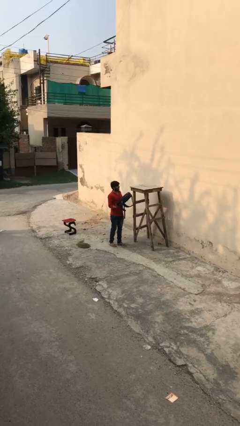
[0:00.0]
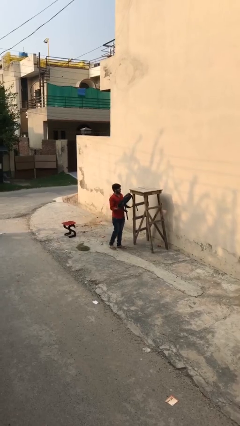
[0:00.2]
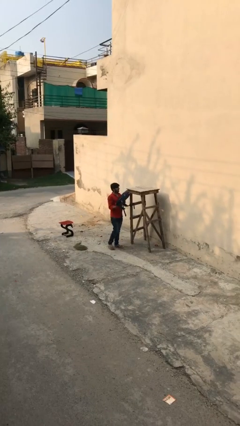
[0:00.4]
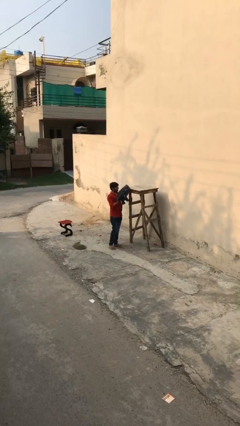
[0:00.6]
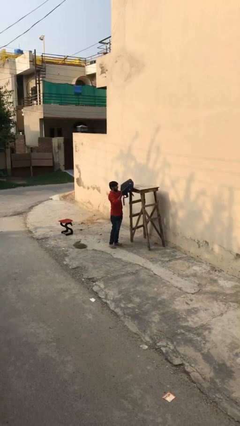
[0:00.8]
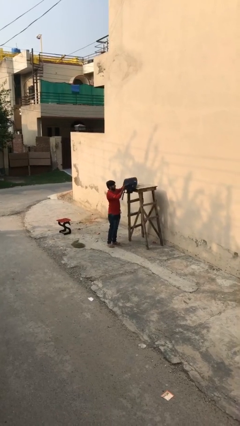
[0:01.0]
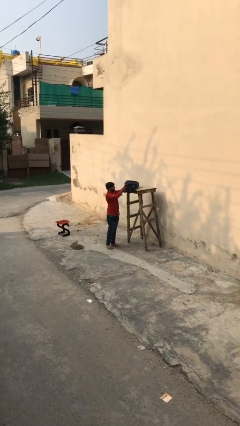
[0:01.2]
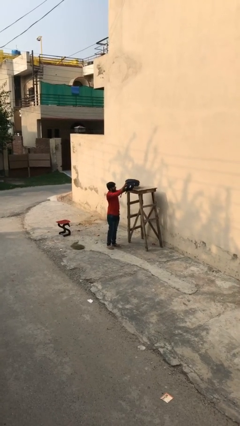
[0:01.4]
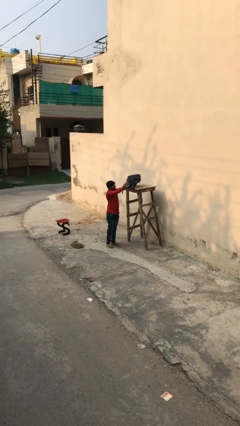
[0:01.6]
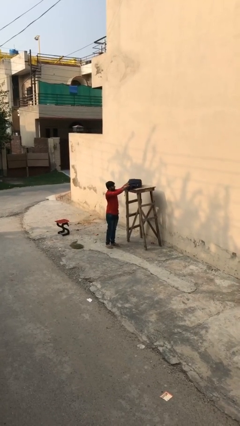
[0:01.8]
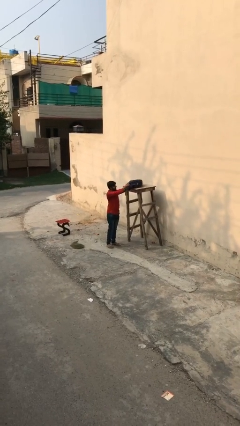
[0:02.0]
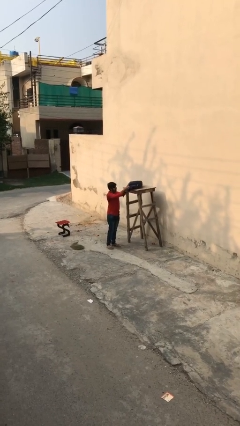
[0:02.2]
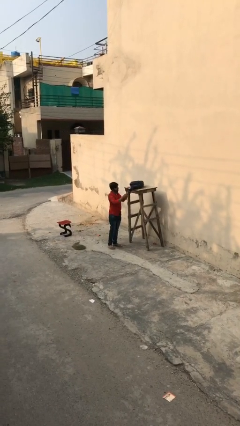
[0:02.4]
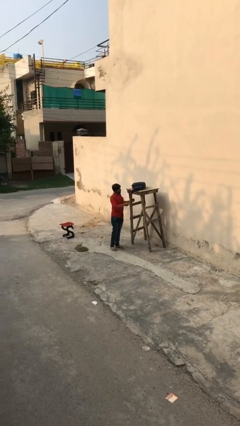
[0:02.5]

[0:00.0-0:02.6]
person puts down object on shelf

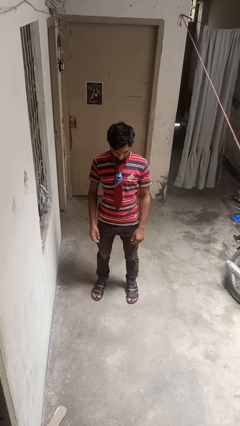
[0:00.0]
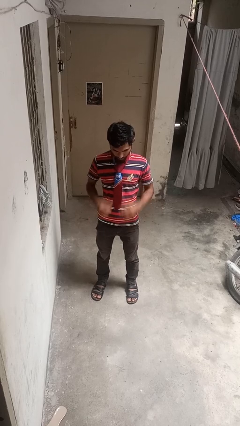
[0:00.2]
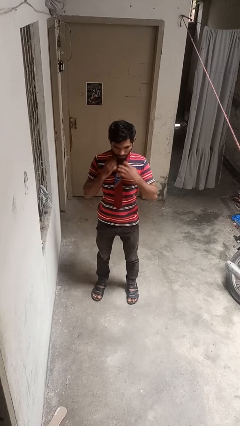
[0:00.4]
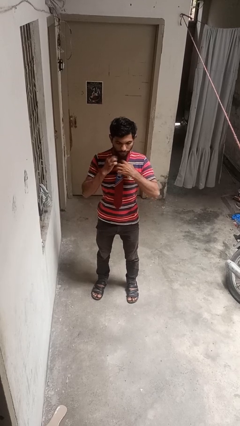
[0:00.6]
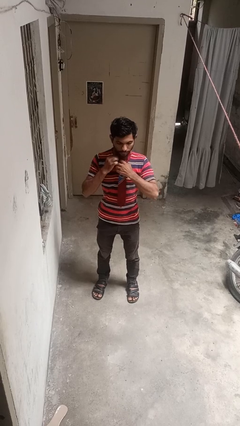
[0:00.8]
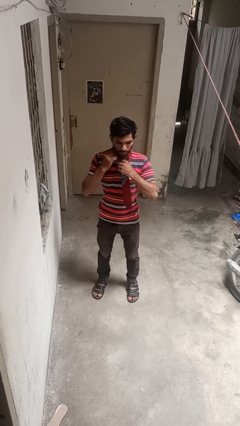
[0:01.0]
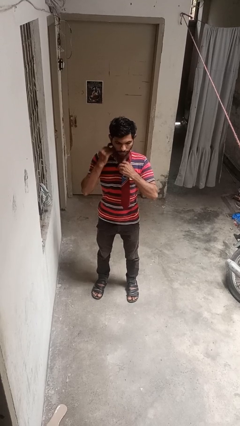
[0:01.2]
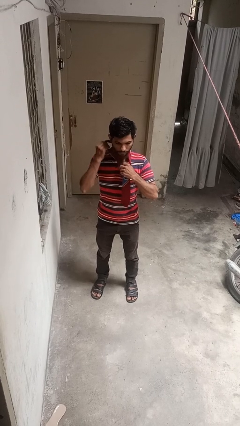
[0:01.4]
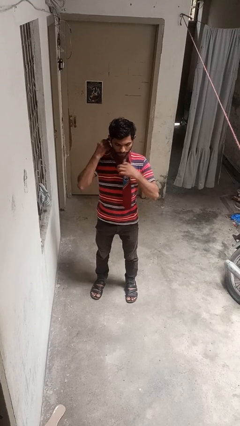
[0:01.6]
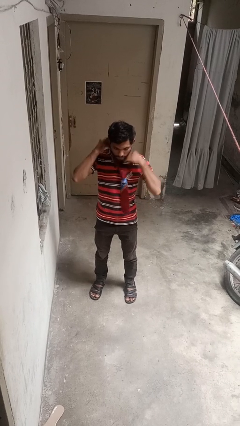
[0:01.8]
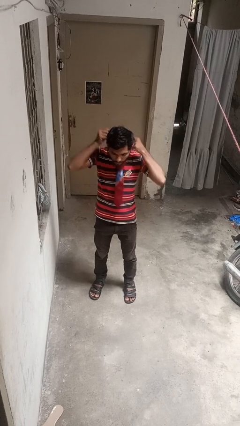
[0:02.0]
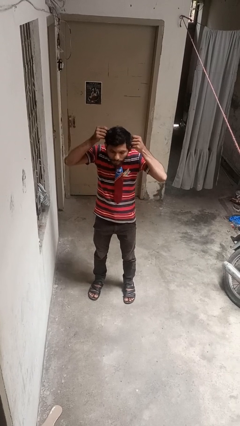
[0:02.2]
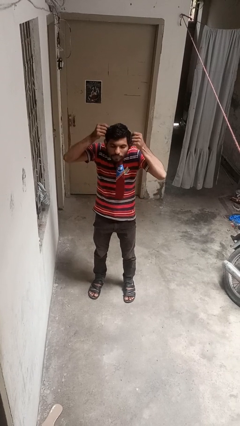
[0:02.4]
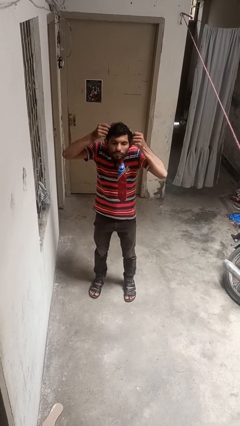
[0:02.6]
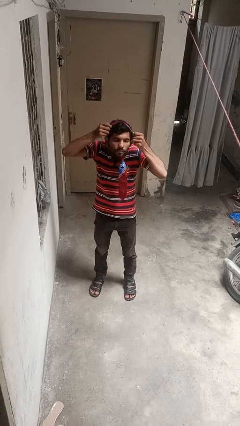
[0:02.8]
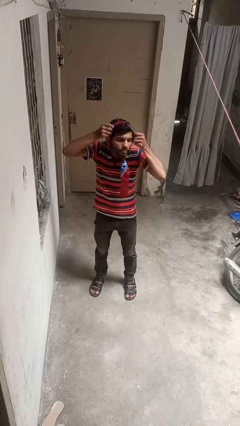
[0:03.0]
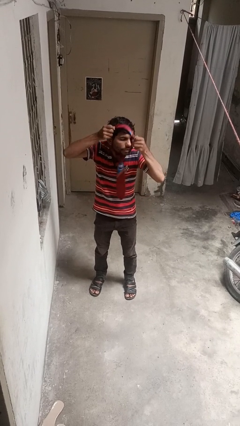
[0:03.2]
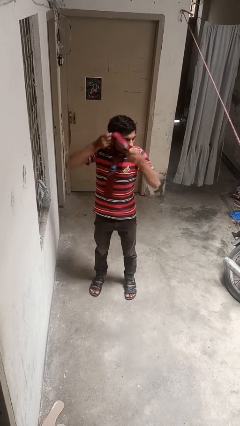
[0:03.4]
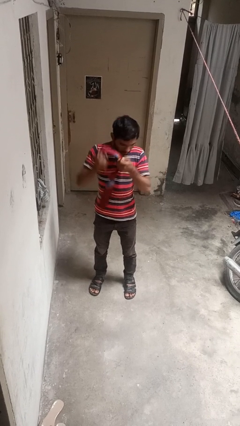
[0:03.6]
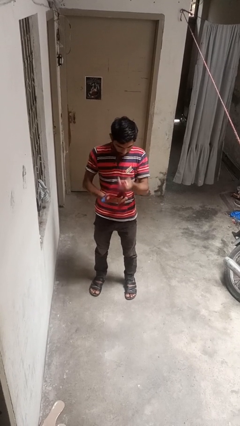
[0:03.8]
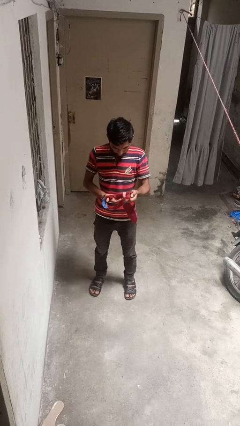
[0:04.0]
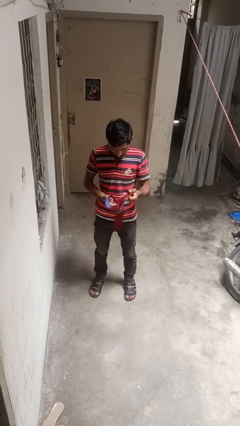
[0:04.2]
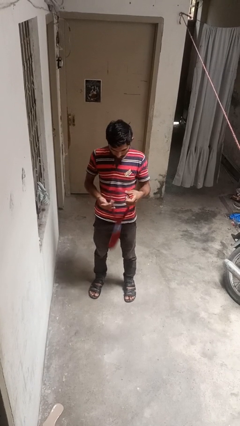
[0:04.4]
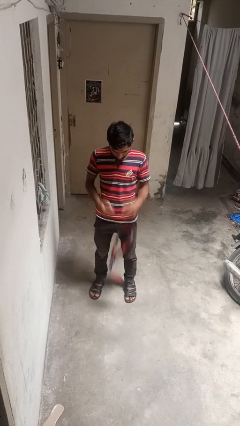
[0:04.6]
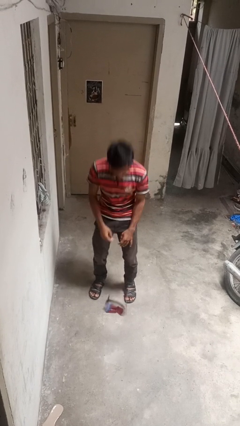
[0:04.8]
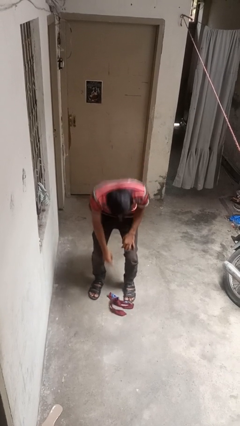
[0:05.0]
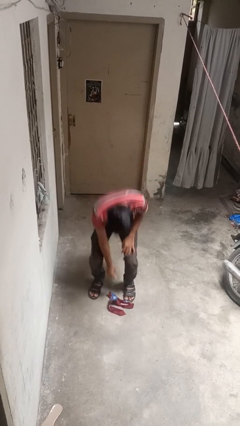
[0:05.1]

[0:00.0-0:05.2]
person takes off necktie

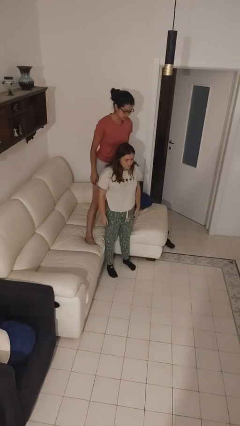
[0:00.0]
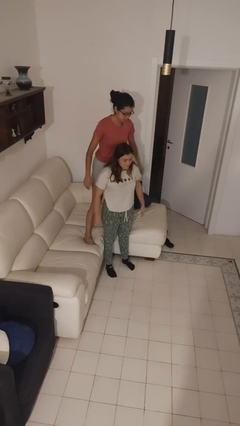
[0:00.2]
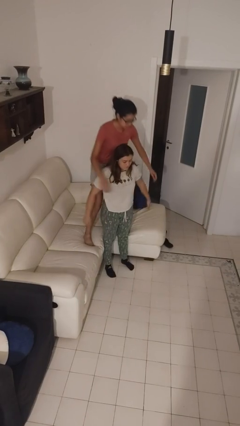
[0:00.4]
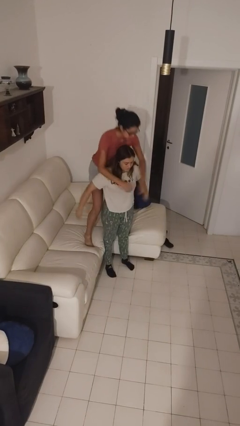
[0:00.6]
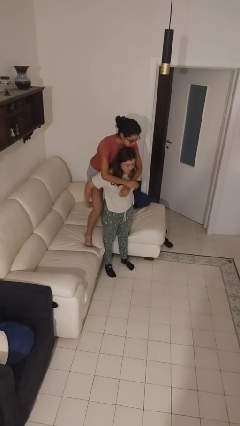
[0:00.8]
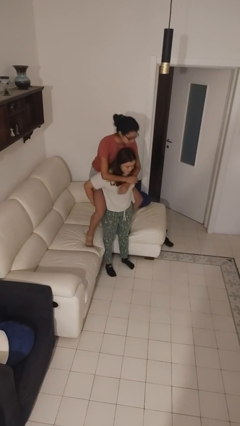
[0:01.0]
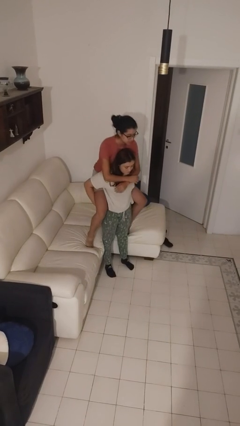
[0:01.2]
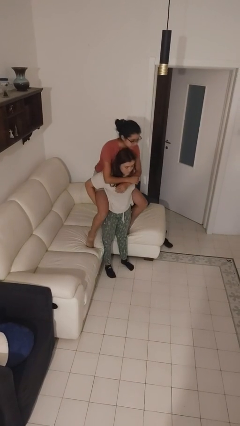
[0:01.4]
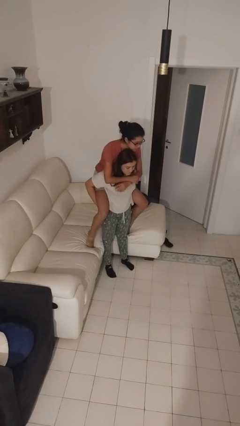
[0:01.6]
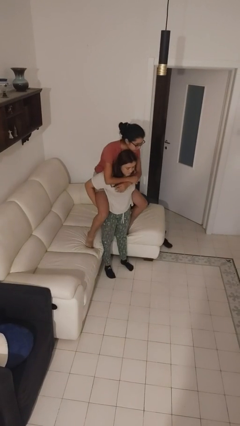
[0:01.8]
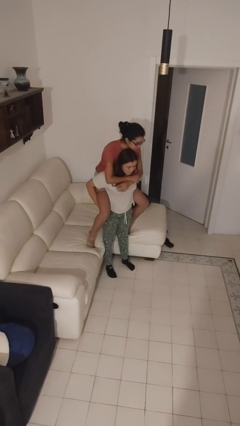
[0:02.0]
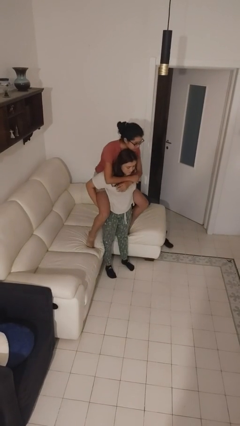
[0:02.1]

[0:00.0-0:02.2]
person carries person over shoulder

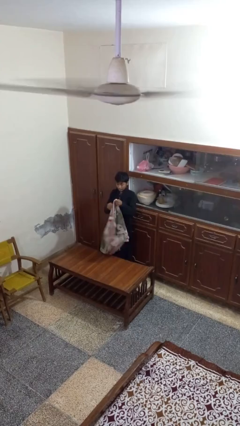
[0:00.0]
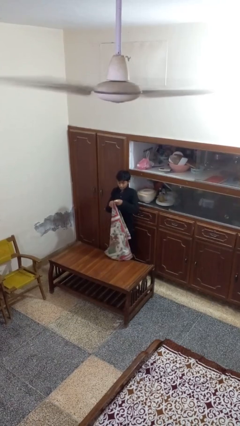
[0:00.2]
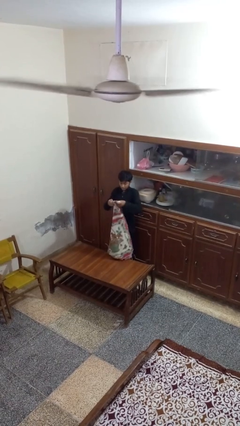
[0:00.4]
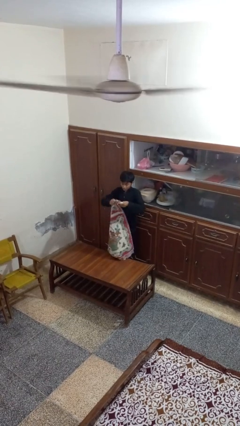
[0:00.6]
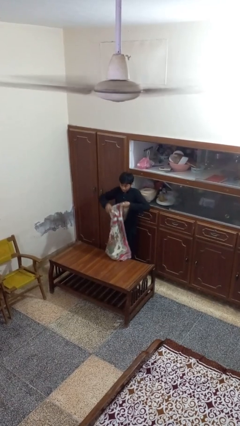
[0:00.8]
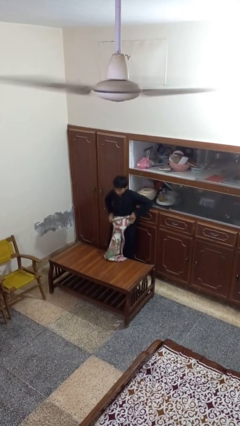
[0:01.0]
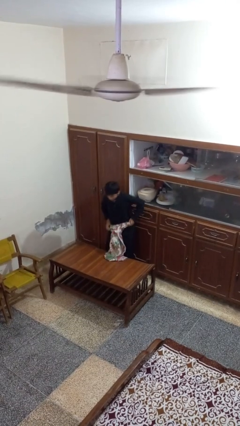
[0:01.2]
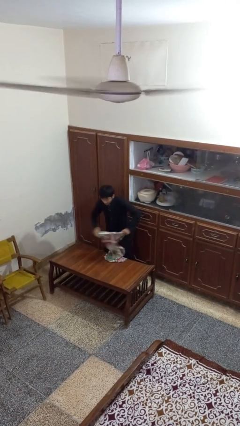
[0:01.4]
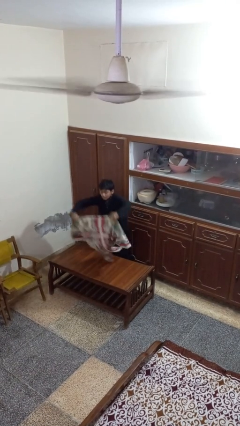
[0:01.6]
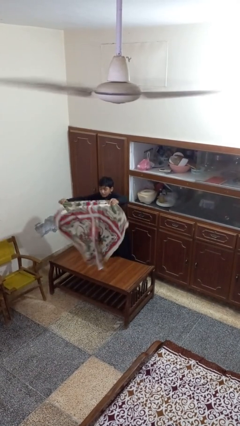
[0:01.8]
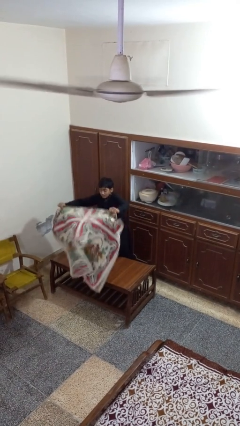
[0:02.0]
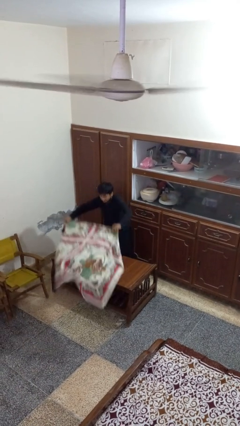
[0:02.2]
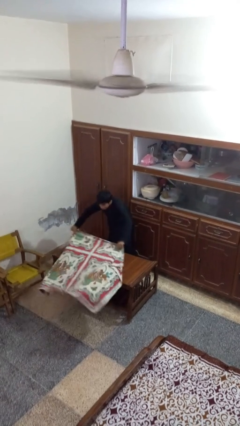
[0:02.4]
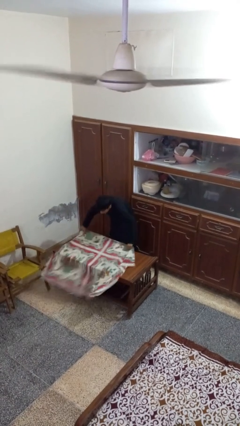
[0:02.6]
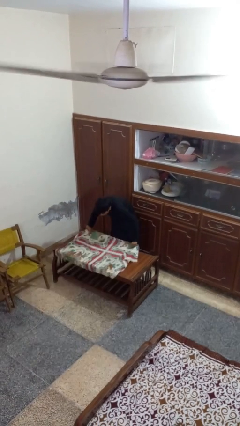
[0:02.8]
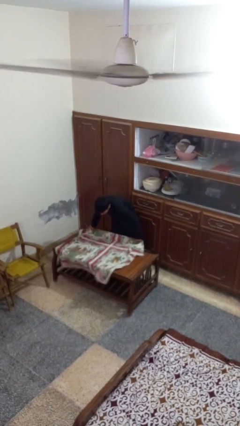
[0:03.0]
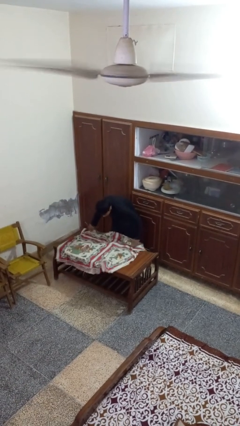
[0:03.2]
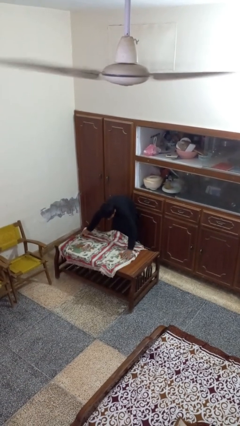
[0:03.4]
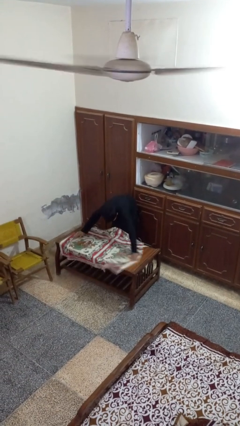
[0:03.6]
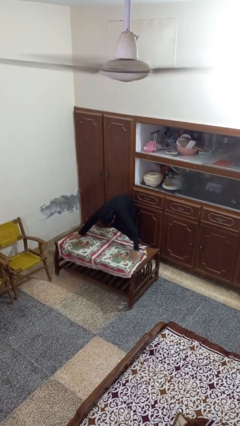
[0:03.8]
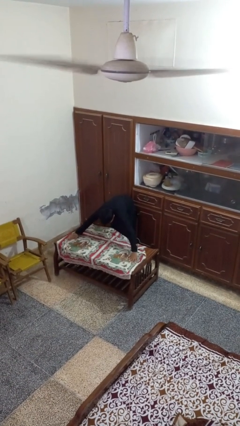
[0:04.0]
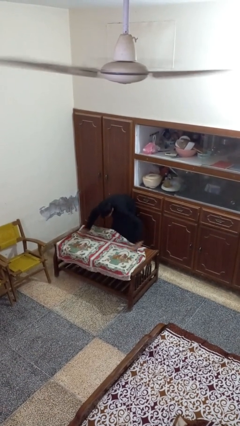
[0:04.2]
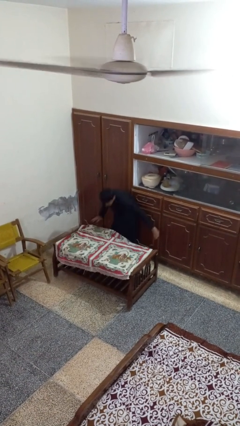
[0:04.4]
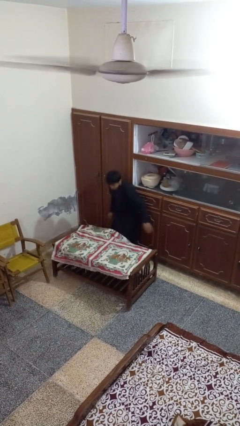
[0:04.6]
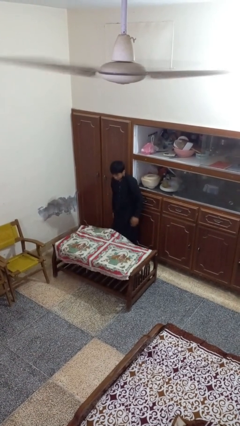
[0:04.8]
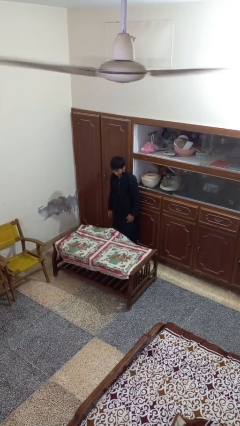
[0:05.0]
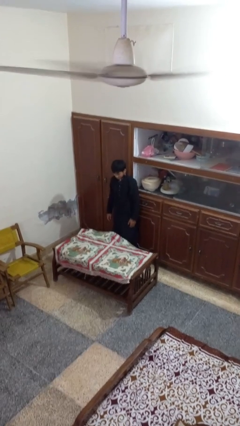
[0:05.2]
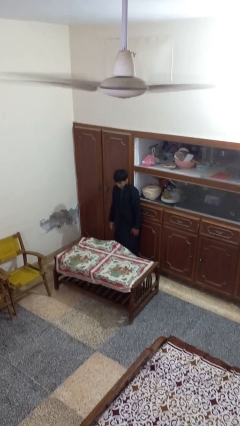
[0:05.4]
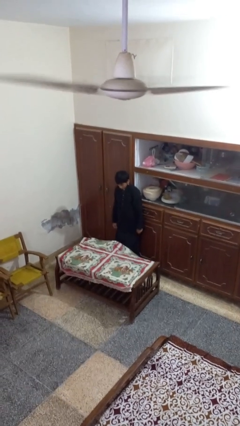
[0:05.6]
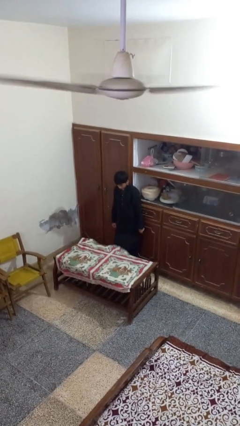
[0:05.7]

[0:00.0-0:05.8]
person spreads tablecloth

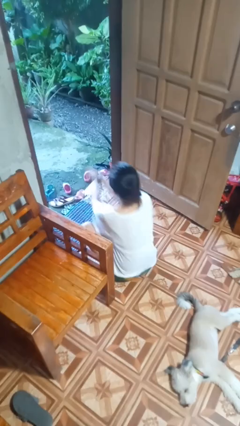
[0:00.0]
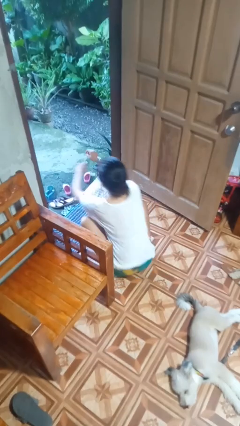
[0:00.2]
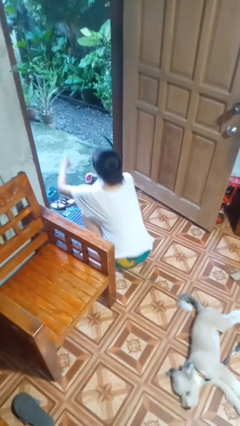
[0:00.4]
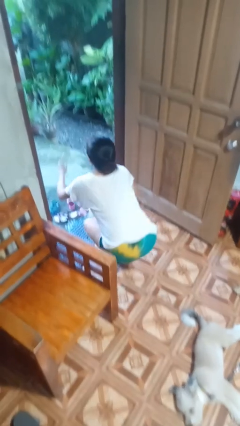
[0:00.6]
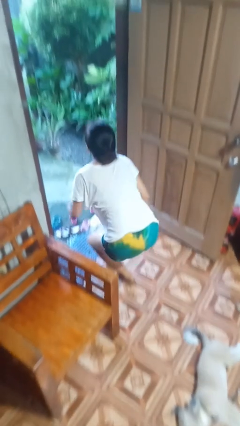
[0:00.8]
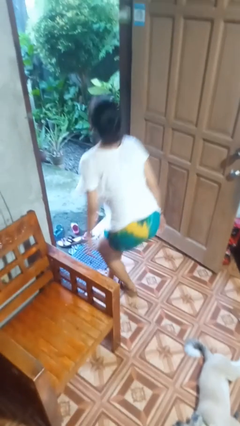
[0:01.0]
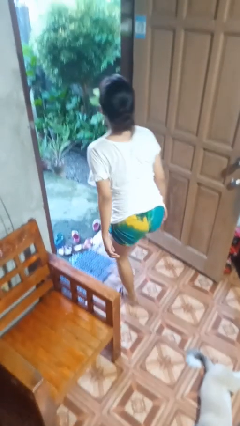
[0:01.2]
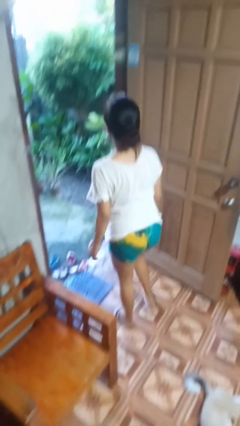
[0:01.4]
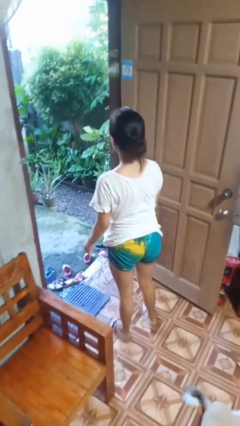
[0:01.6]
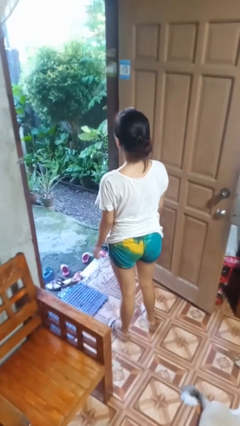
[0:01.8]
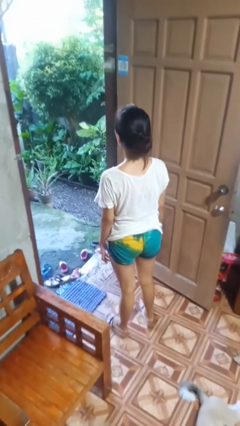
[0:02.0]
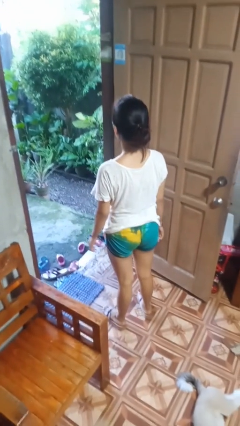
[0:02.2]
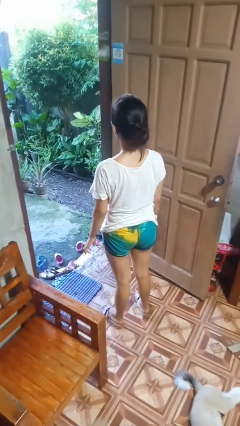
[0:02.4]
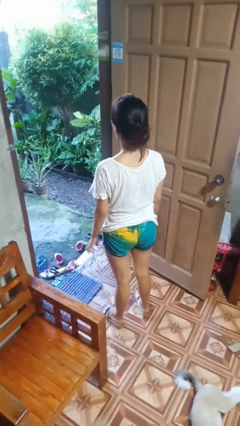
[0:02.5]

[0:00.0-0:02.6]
person stands up from floor
